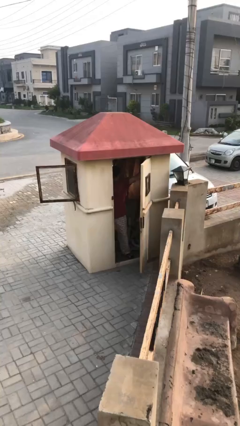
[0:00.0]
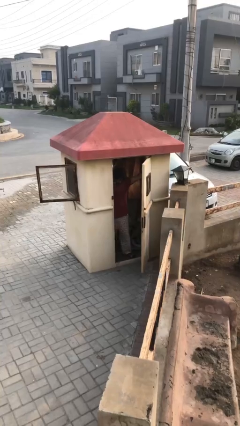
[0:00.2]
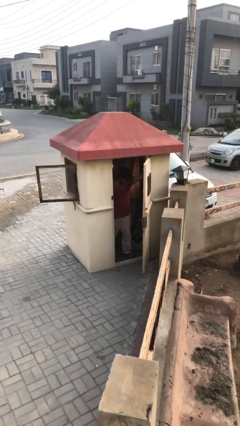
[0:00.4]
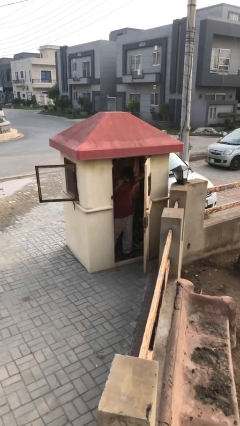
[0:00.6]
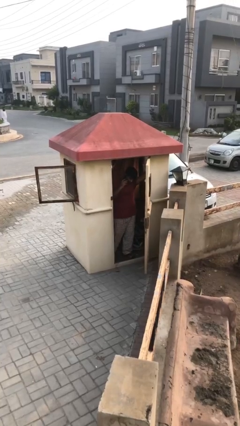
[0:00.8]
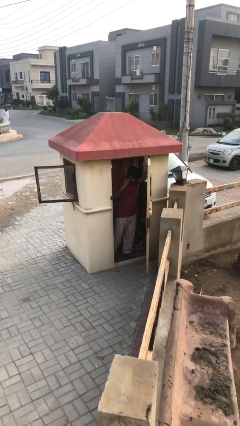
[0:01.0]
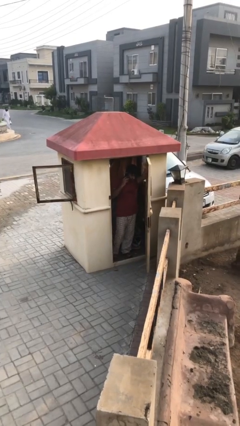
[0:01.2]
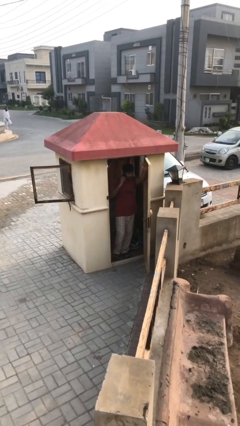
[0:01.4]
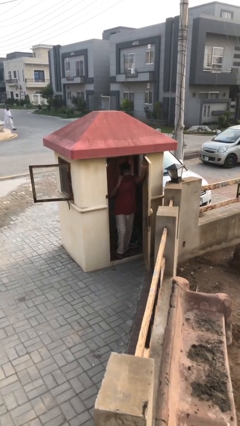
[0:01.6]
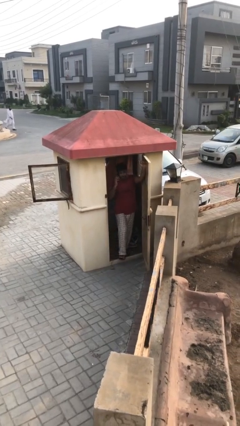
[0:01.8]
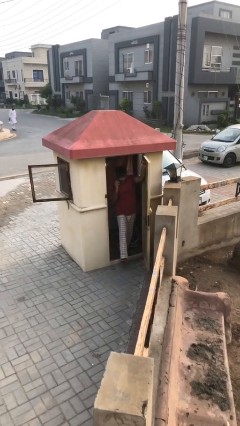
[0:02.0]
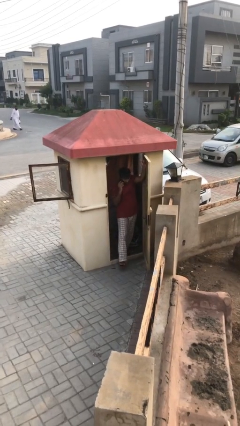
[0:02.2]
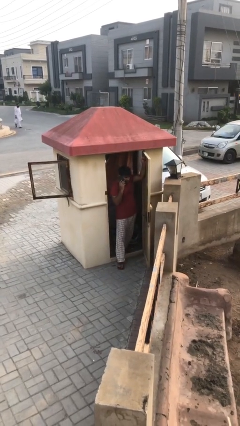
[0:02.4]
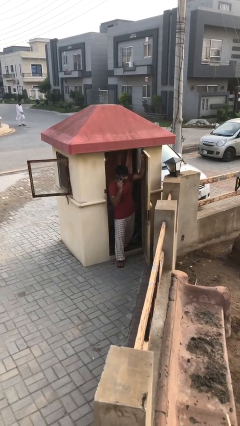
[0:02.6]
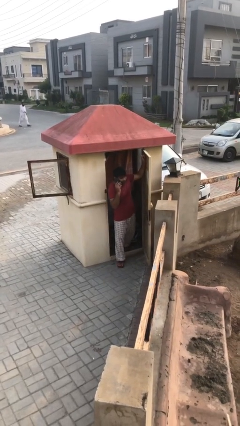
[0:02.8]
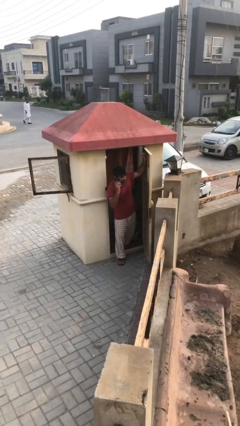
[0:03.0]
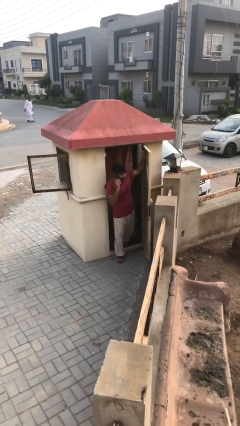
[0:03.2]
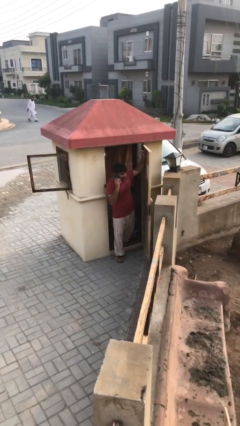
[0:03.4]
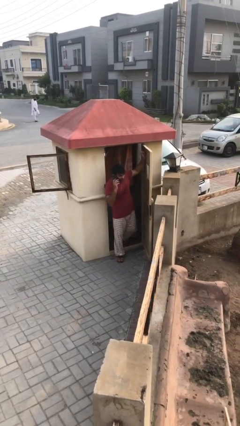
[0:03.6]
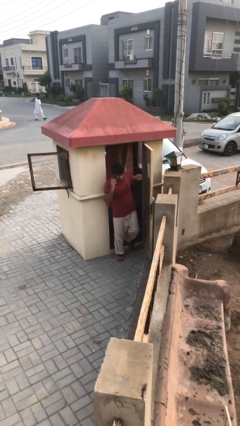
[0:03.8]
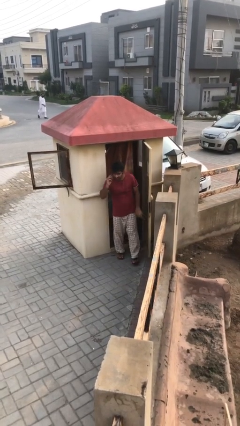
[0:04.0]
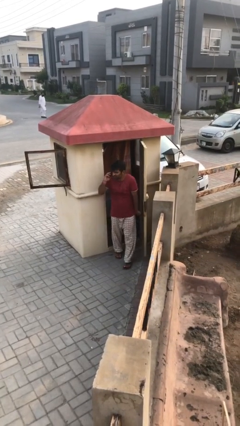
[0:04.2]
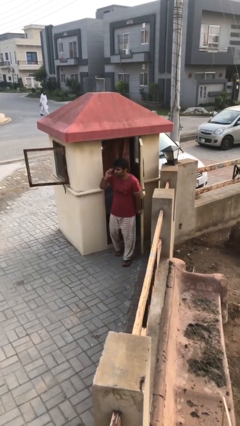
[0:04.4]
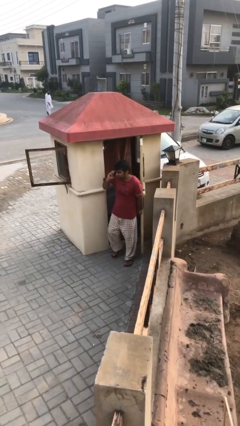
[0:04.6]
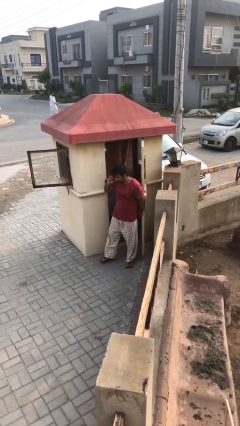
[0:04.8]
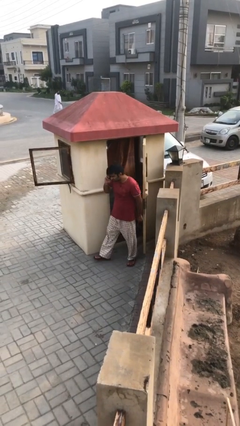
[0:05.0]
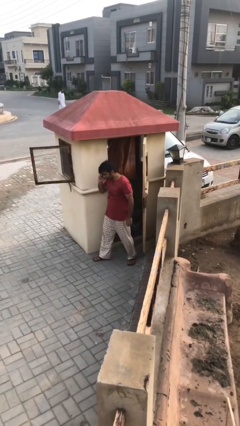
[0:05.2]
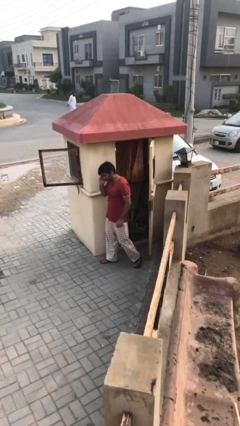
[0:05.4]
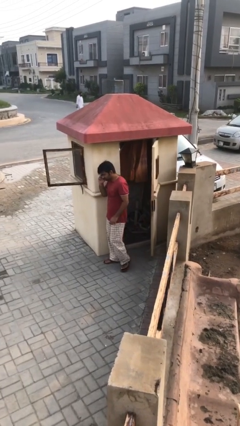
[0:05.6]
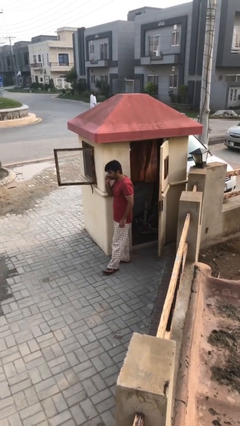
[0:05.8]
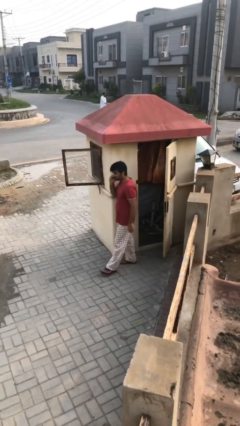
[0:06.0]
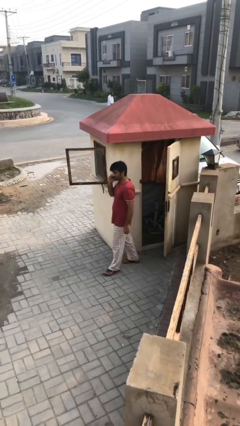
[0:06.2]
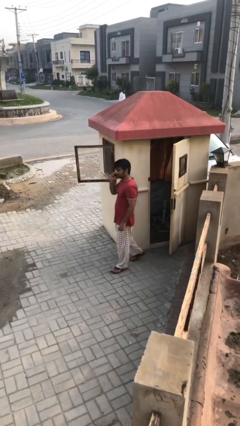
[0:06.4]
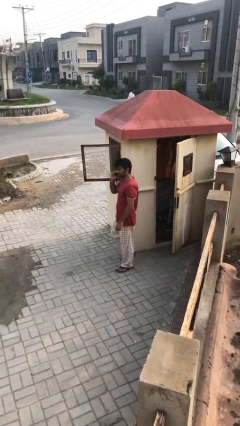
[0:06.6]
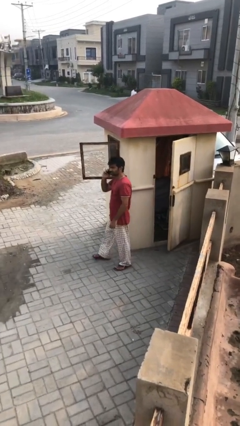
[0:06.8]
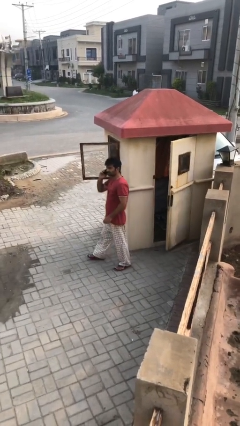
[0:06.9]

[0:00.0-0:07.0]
person enters scene through structure

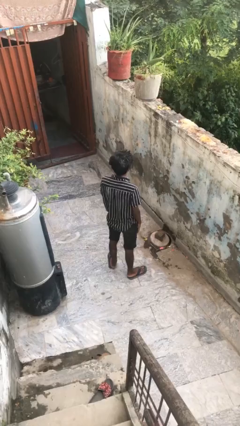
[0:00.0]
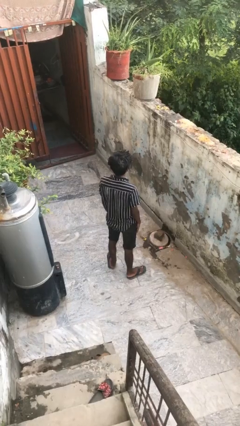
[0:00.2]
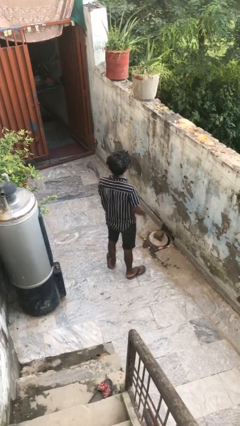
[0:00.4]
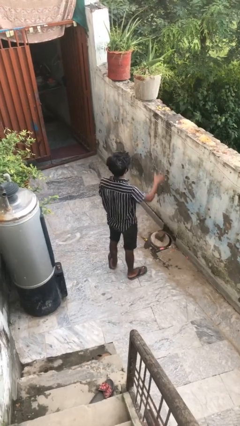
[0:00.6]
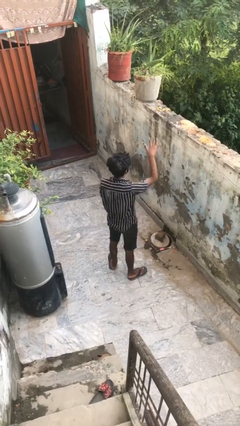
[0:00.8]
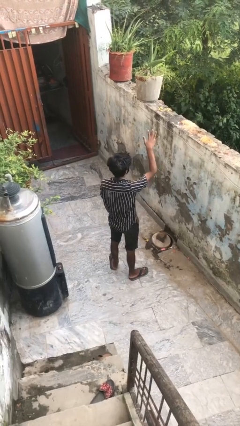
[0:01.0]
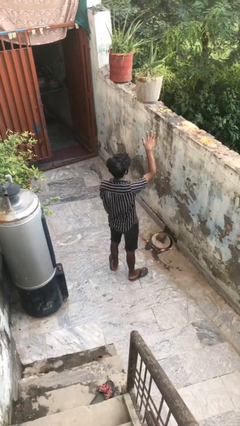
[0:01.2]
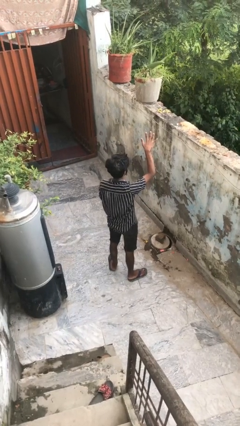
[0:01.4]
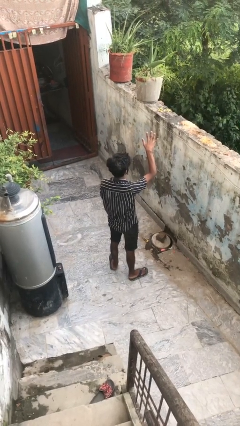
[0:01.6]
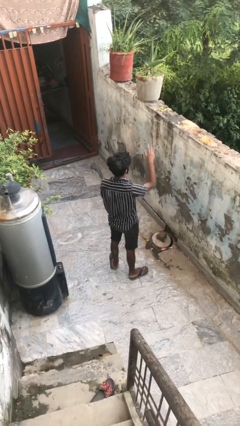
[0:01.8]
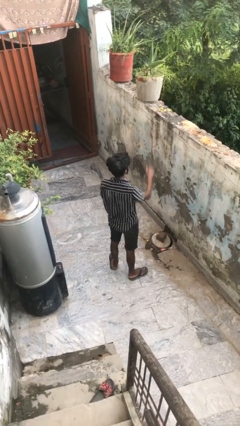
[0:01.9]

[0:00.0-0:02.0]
person gestures number five

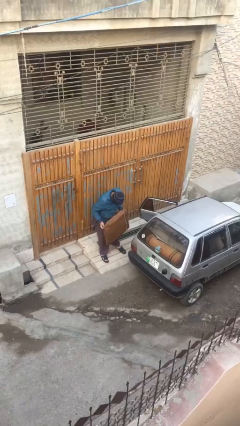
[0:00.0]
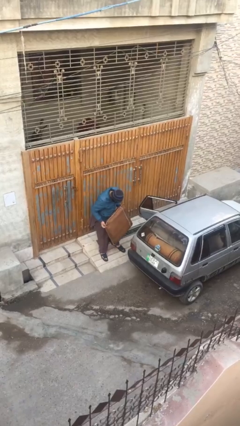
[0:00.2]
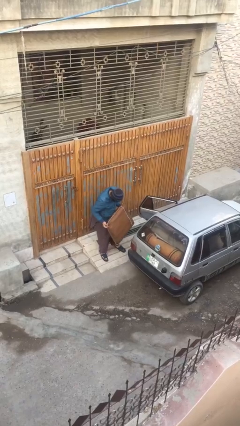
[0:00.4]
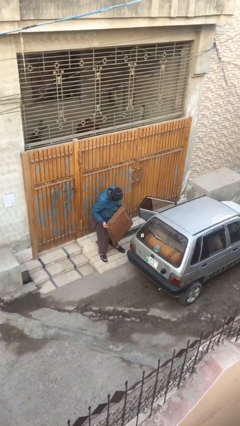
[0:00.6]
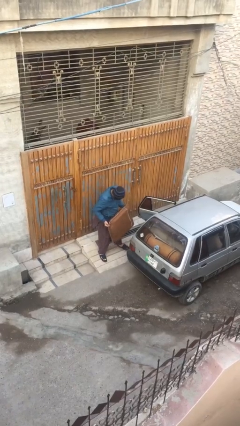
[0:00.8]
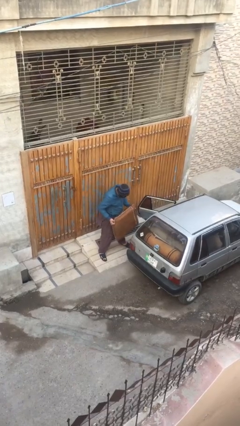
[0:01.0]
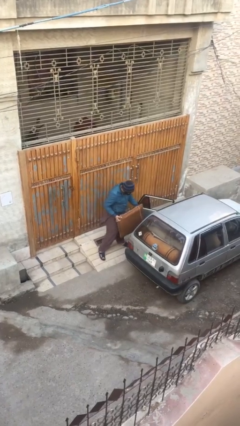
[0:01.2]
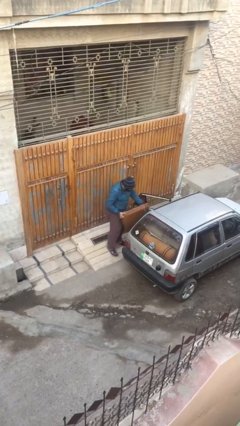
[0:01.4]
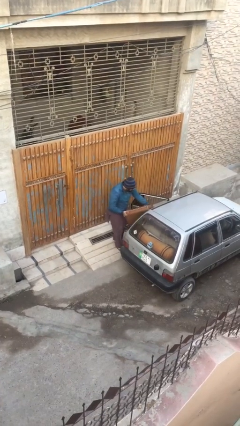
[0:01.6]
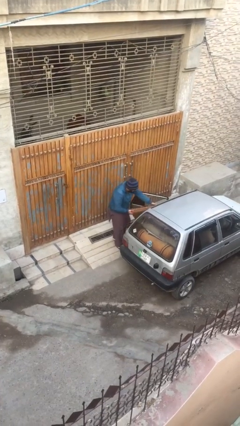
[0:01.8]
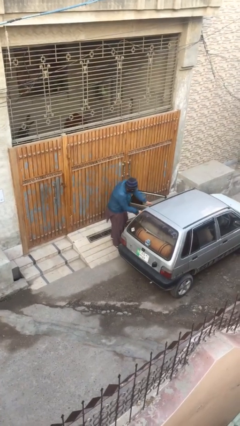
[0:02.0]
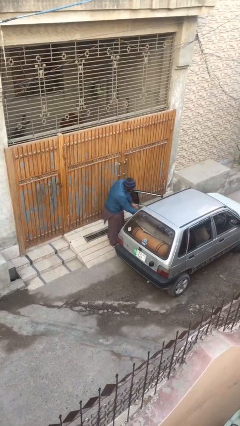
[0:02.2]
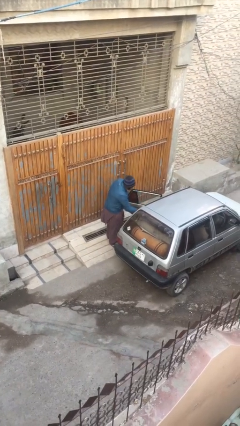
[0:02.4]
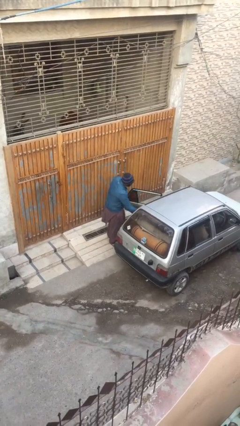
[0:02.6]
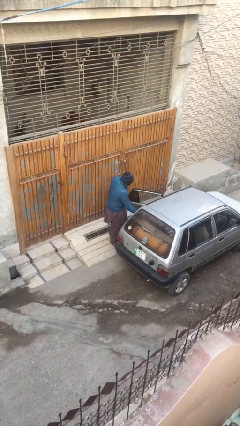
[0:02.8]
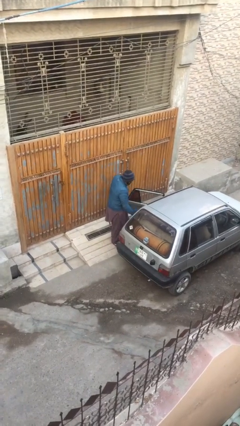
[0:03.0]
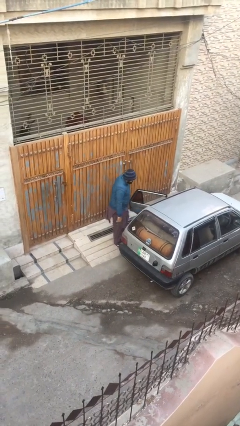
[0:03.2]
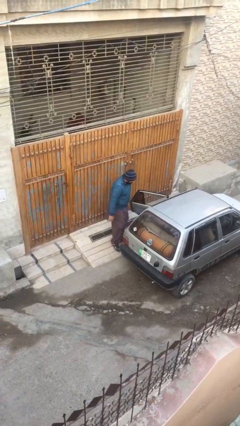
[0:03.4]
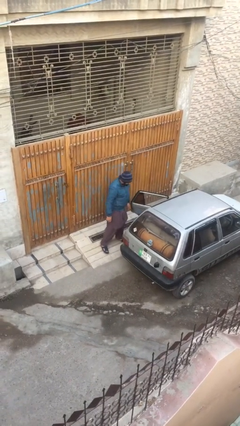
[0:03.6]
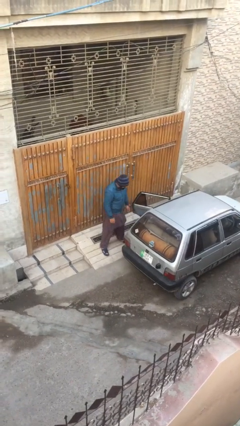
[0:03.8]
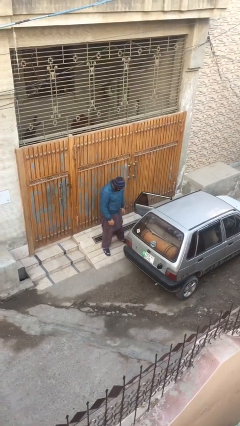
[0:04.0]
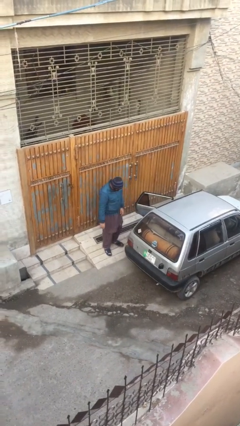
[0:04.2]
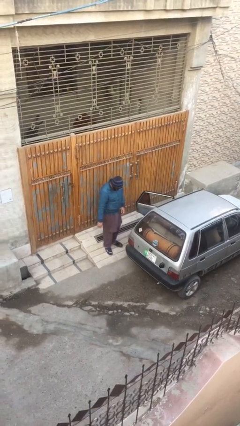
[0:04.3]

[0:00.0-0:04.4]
person loads car

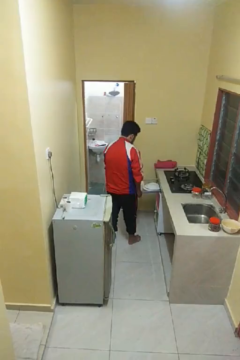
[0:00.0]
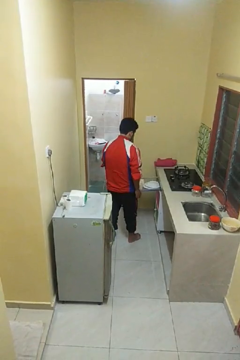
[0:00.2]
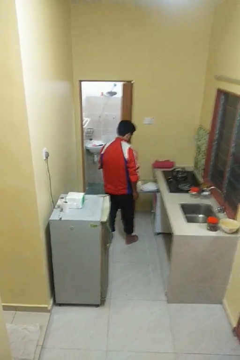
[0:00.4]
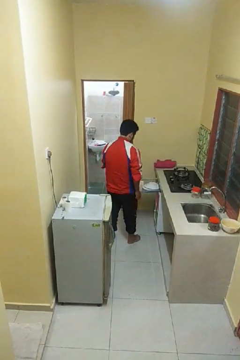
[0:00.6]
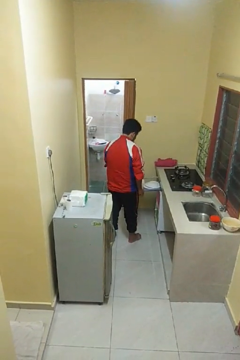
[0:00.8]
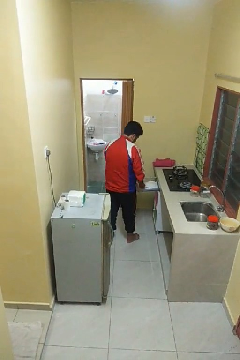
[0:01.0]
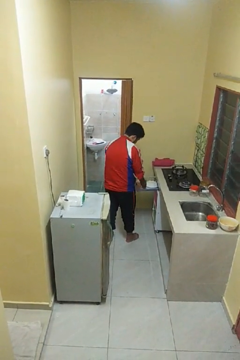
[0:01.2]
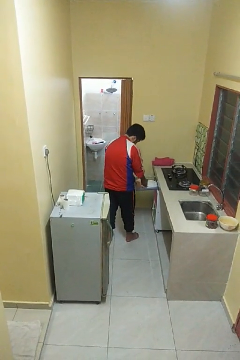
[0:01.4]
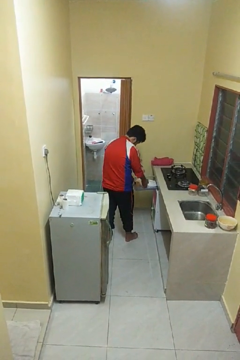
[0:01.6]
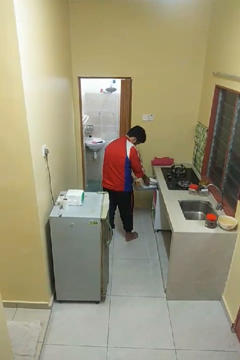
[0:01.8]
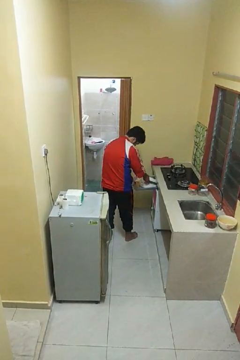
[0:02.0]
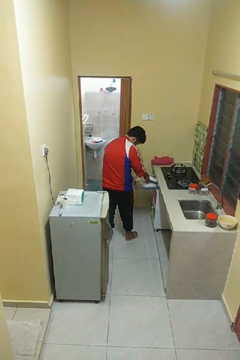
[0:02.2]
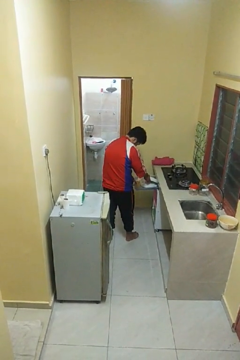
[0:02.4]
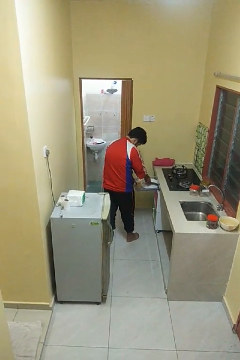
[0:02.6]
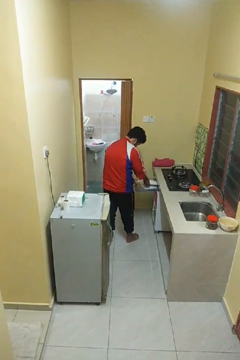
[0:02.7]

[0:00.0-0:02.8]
person searches in kitchen drawer

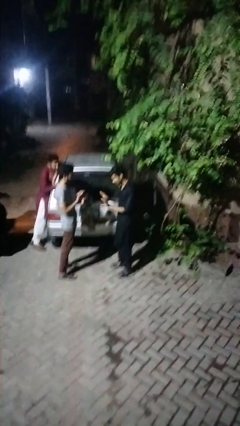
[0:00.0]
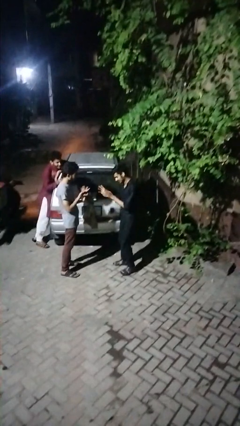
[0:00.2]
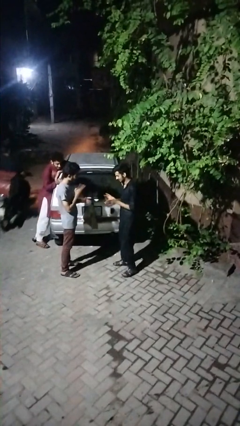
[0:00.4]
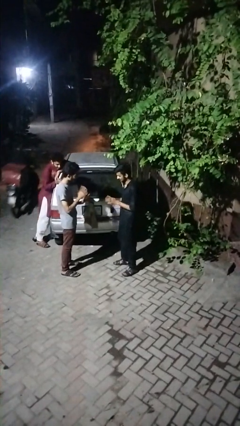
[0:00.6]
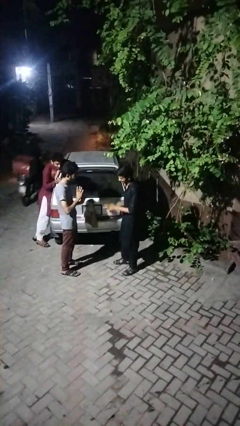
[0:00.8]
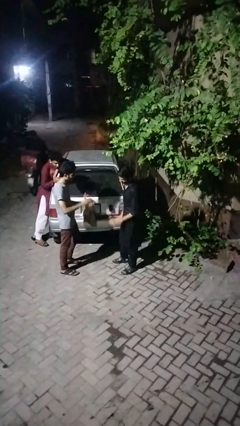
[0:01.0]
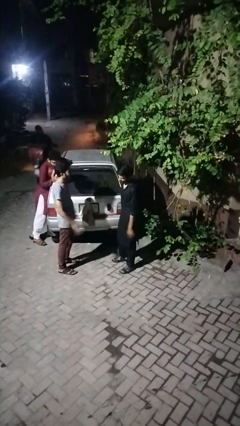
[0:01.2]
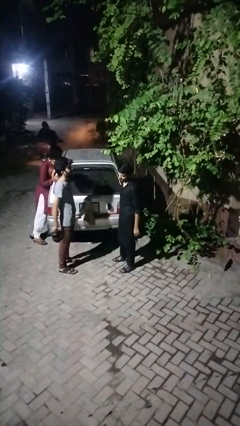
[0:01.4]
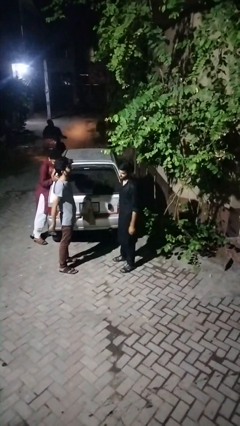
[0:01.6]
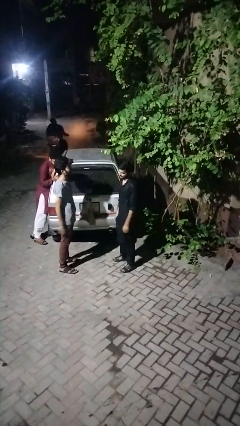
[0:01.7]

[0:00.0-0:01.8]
person talks to person
